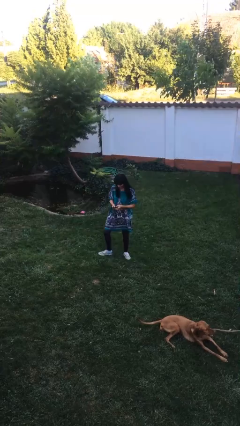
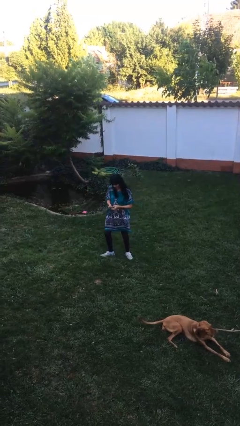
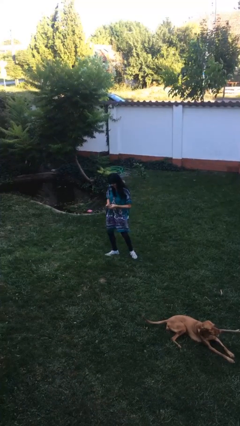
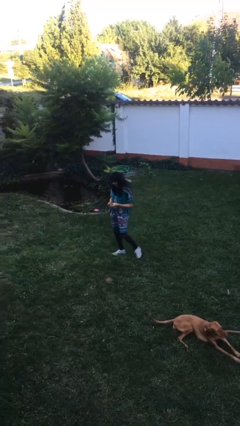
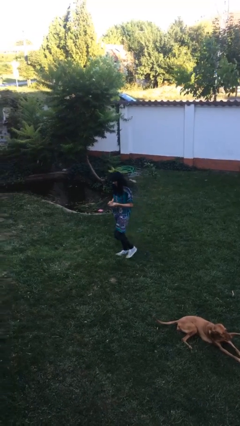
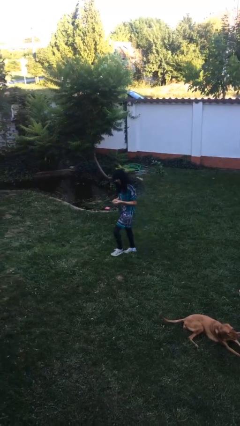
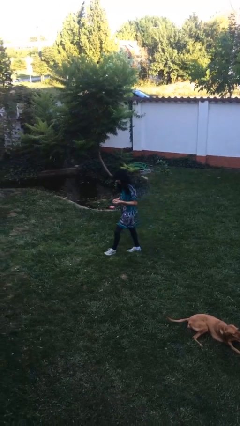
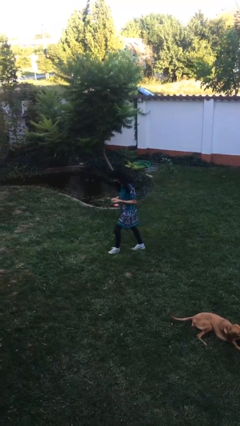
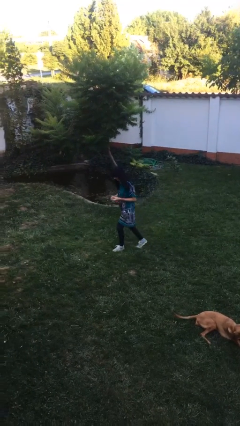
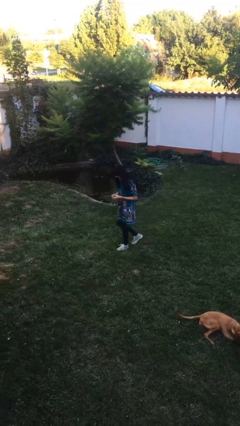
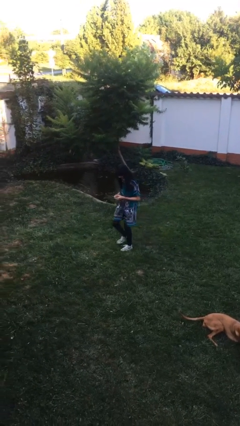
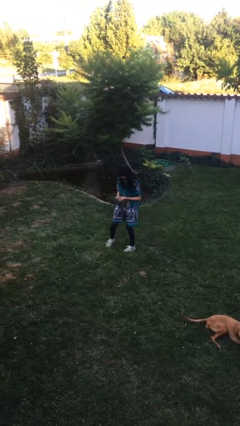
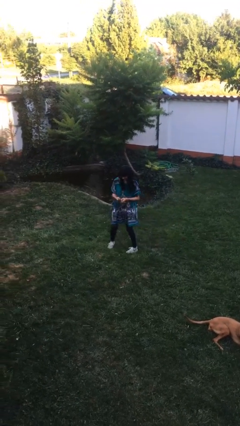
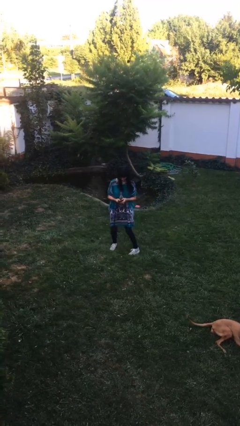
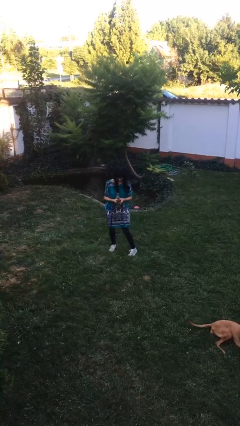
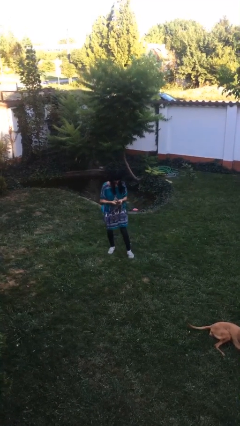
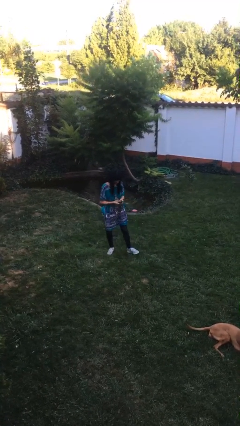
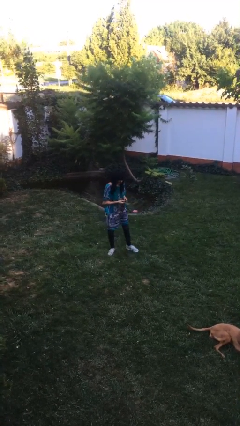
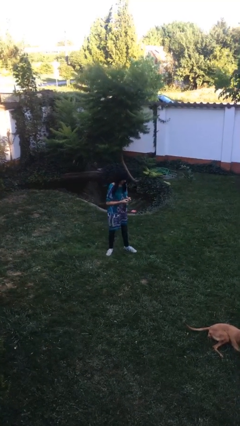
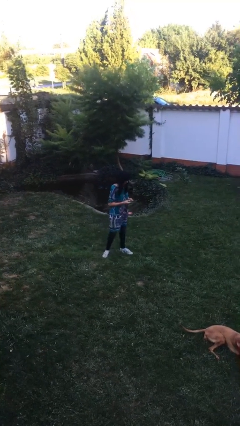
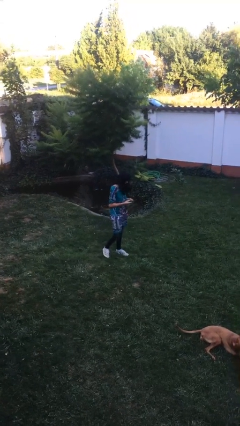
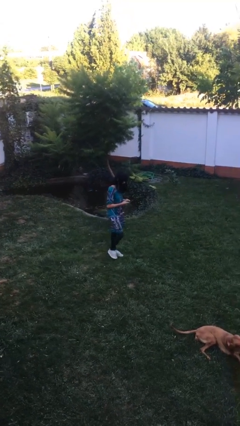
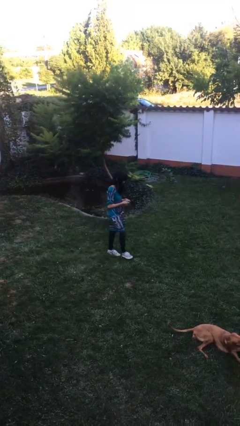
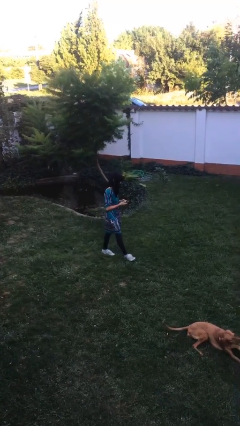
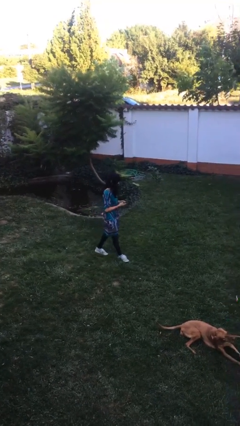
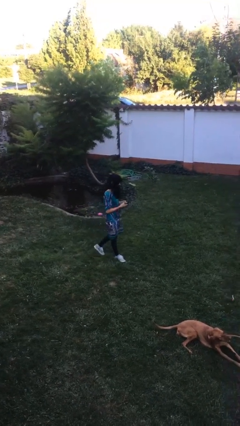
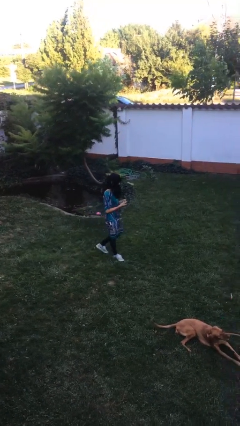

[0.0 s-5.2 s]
person texts on phone

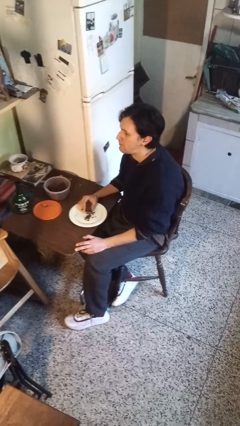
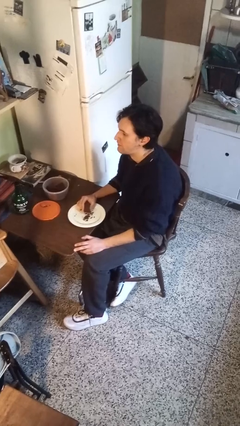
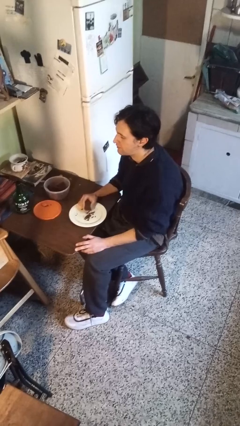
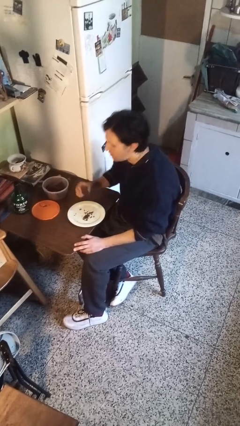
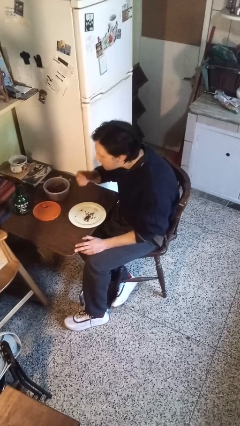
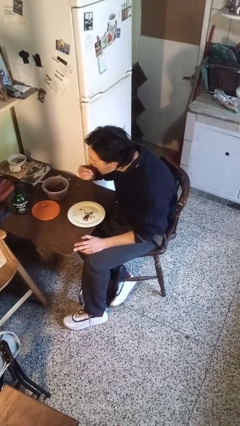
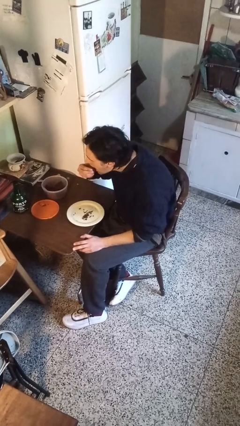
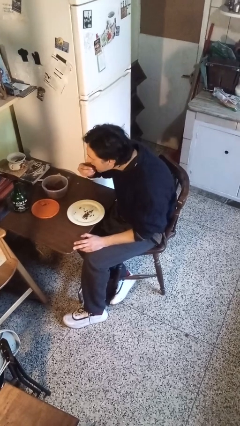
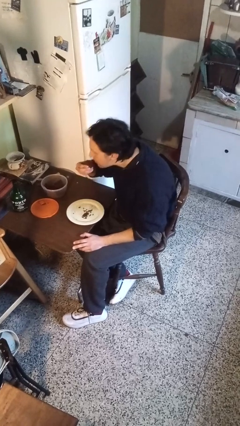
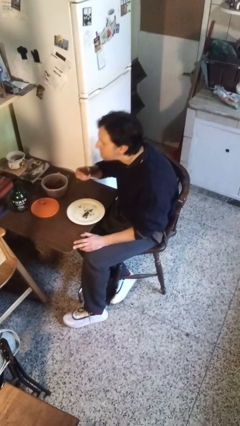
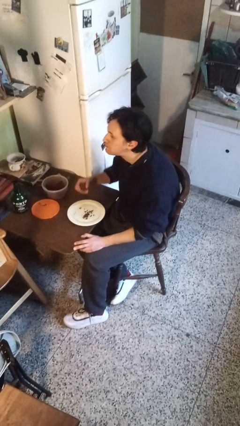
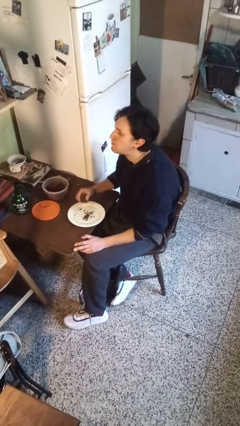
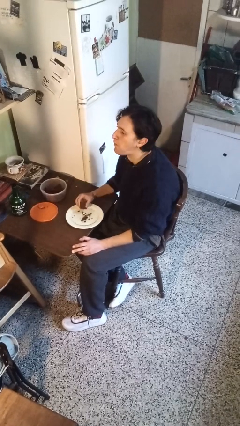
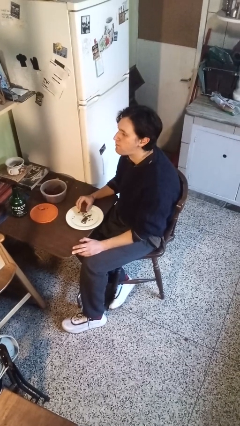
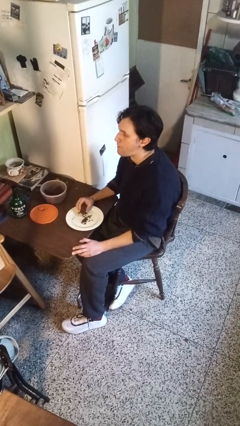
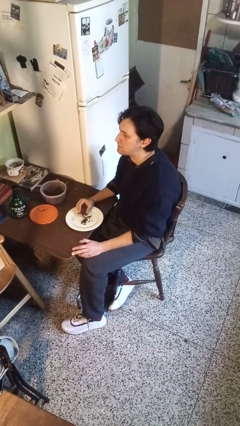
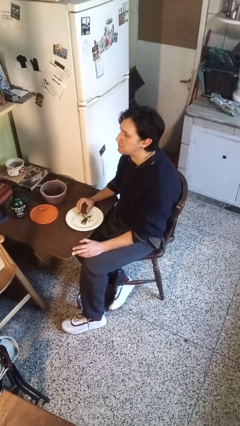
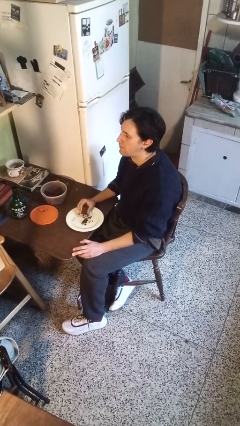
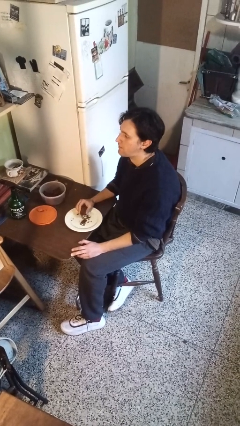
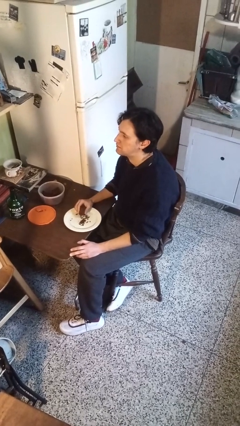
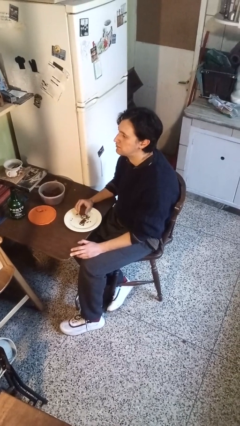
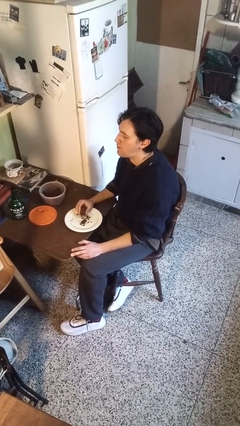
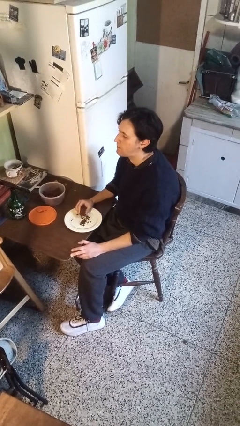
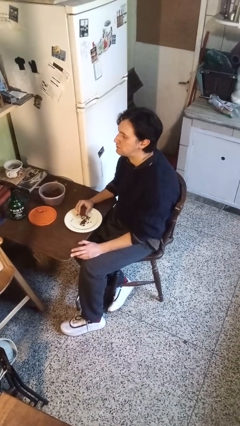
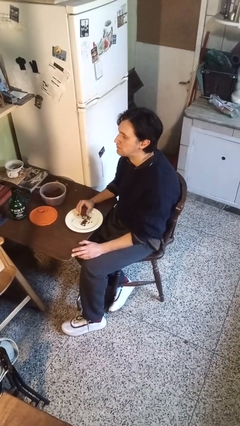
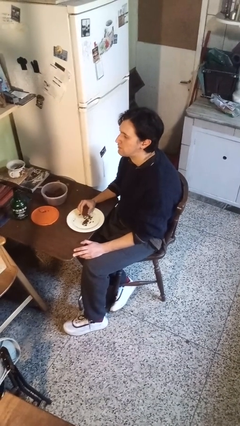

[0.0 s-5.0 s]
person eats with hands

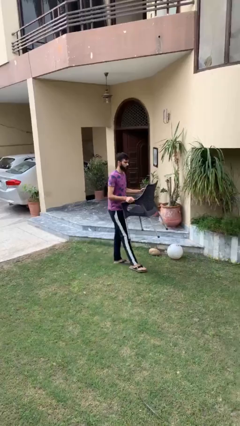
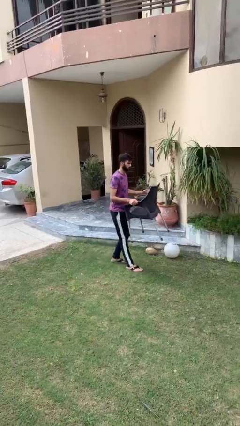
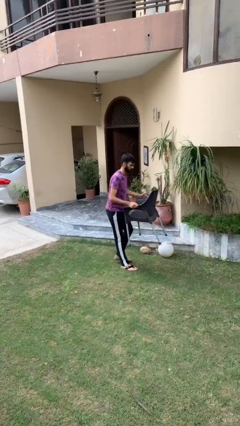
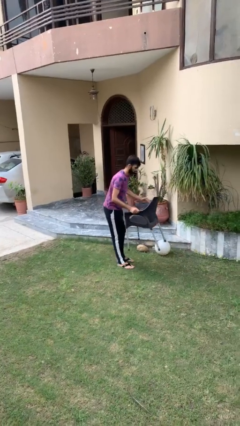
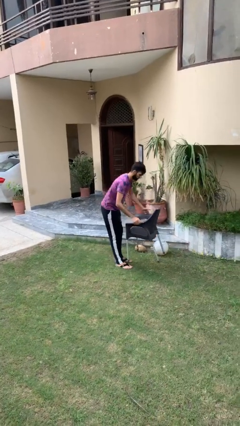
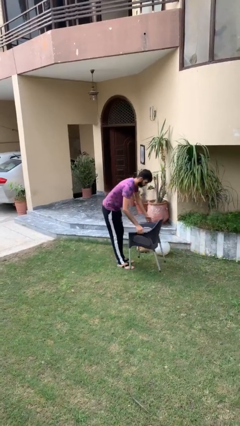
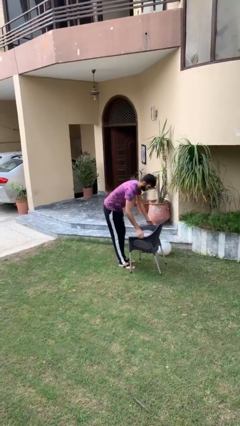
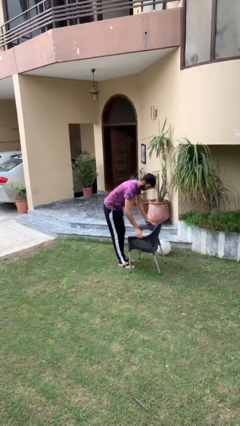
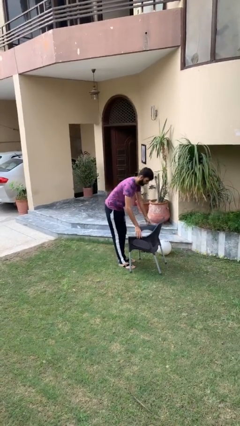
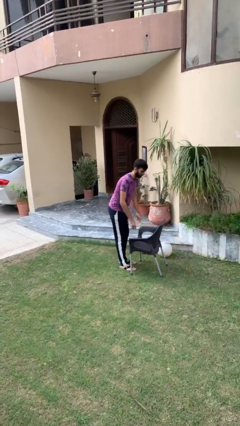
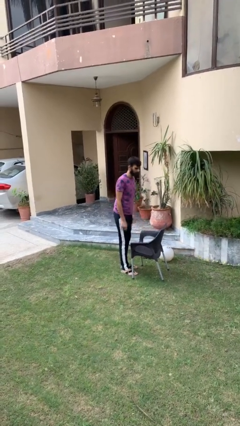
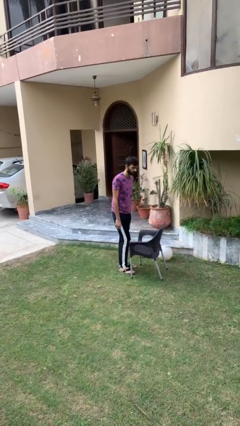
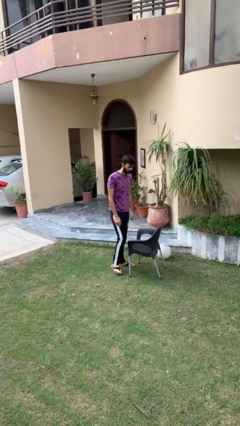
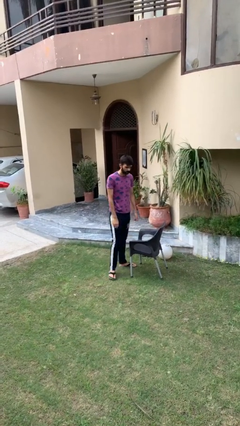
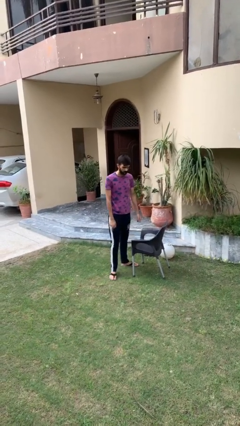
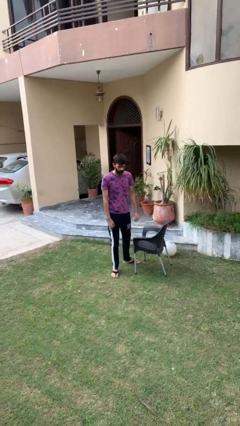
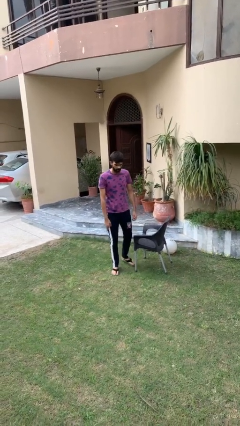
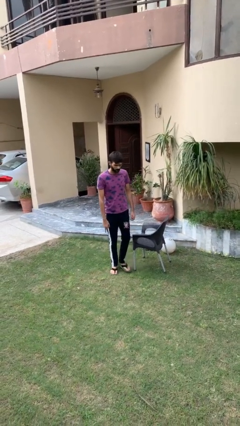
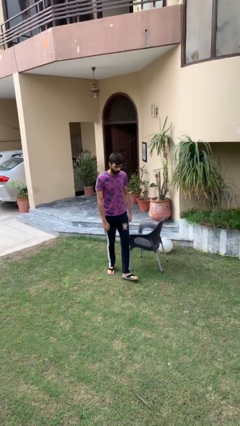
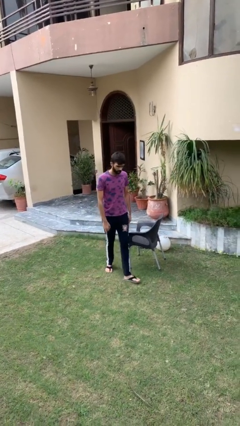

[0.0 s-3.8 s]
person puts down object on floor

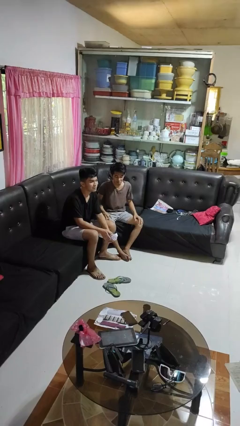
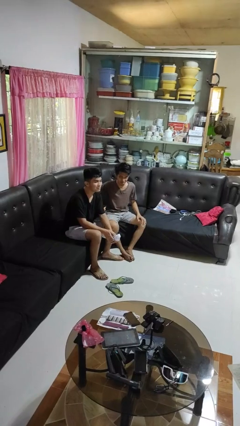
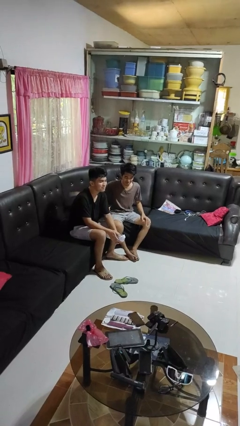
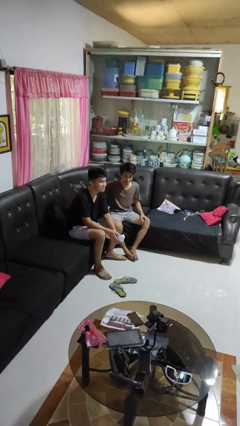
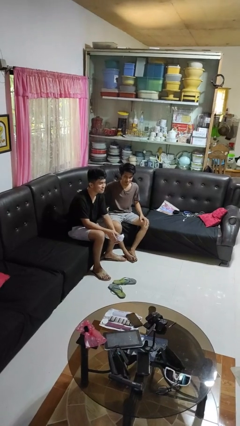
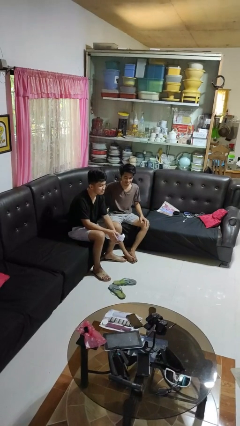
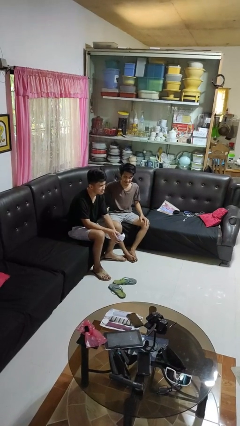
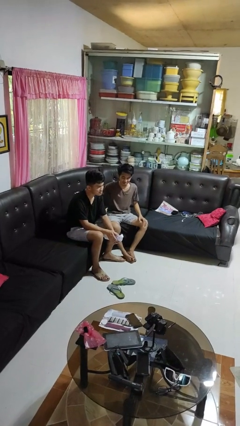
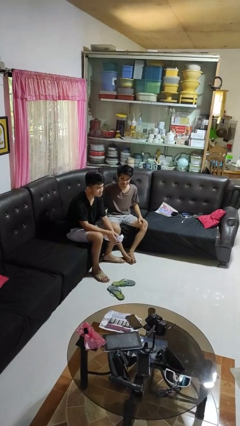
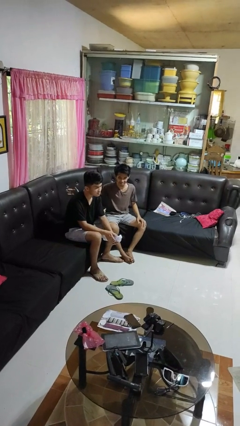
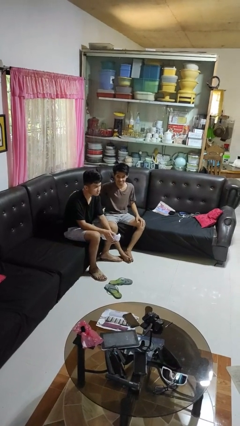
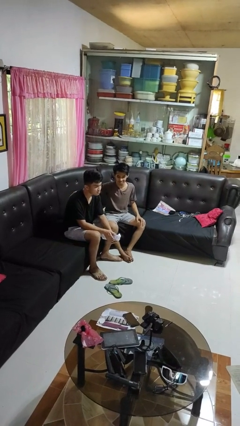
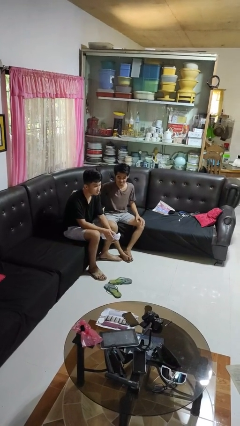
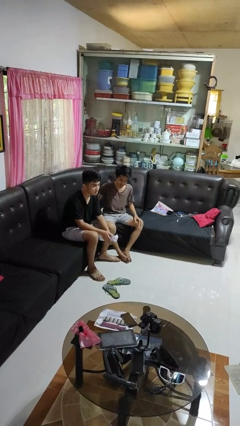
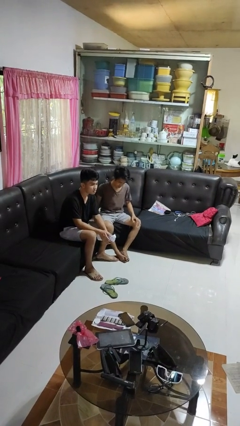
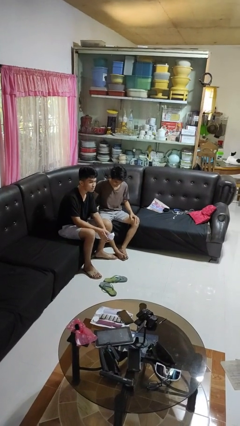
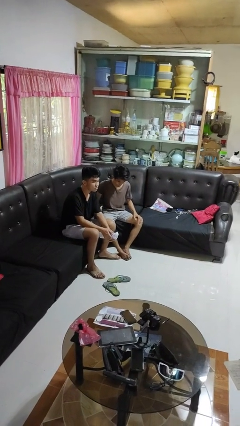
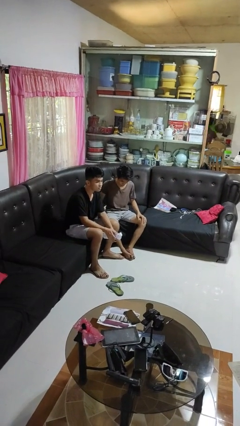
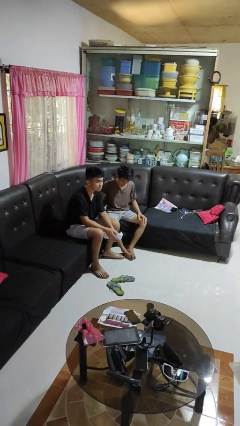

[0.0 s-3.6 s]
person touches back of person
